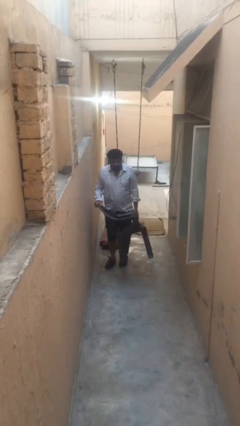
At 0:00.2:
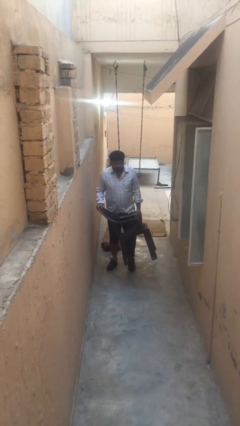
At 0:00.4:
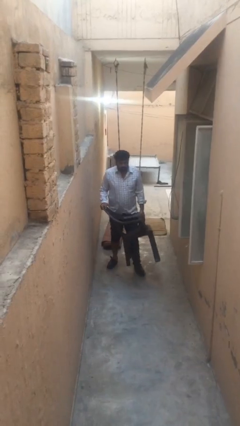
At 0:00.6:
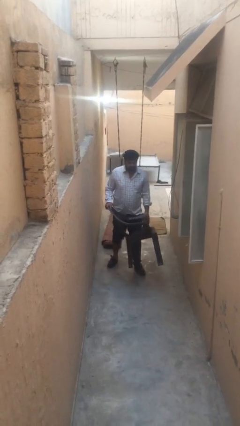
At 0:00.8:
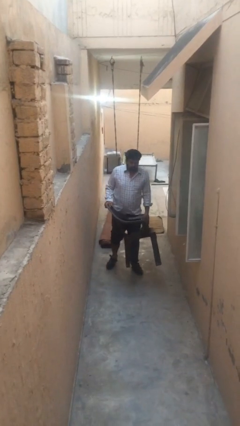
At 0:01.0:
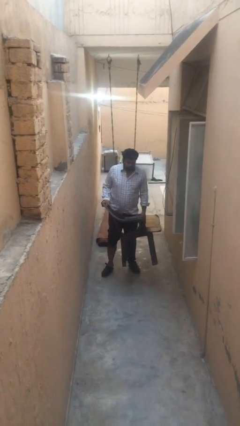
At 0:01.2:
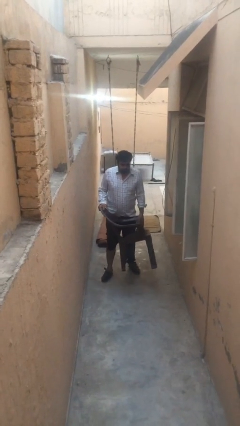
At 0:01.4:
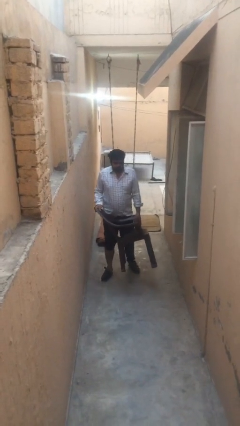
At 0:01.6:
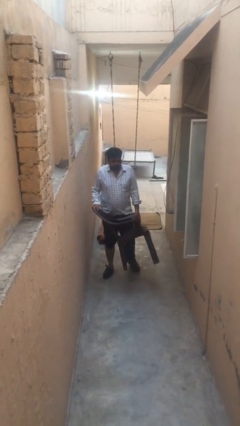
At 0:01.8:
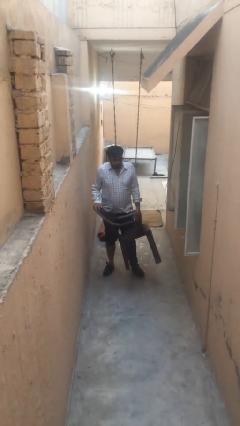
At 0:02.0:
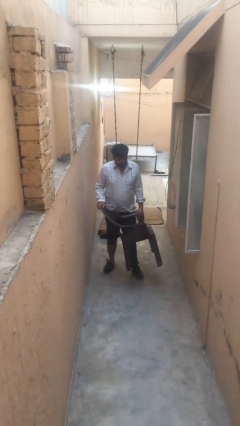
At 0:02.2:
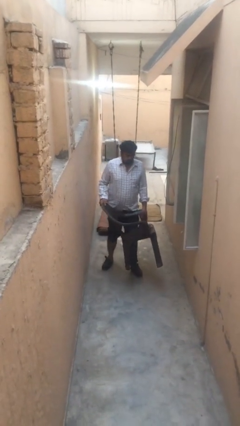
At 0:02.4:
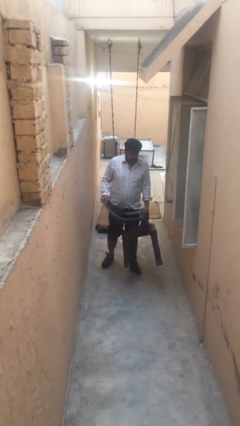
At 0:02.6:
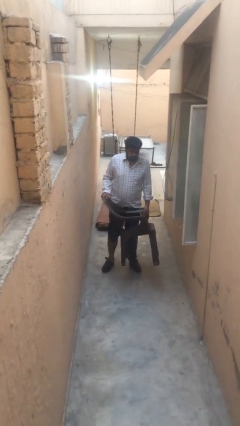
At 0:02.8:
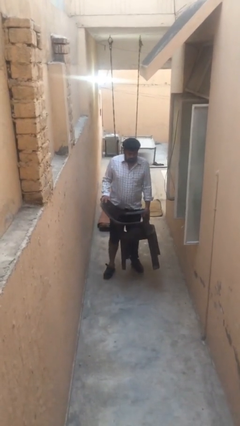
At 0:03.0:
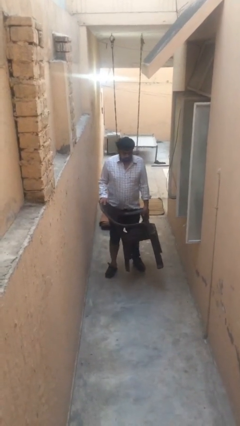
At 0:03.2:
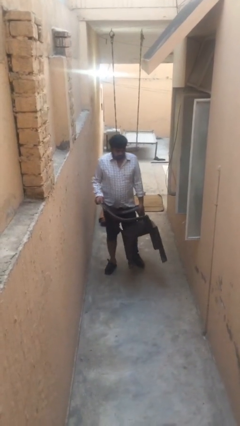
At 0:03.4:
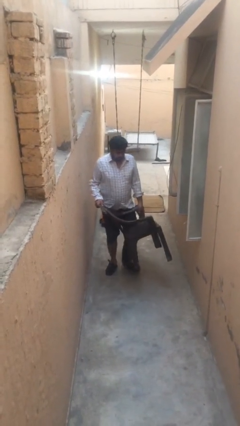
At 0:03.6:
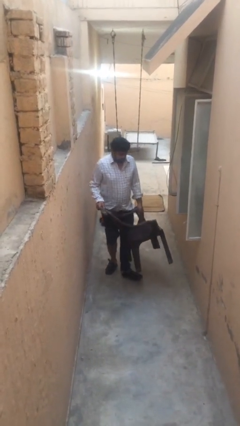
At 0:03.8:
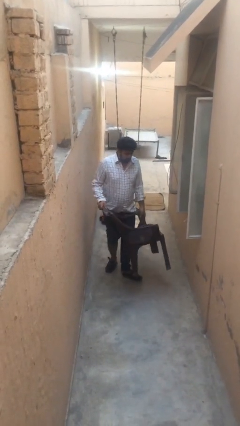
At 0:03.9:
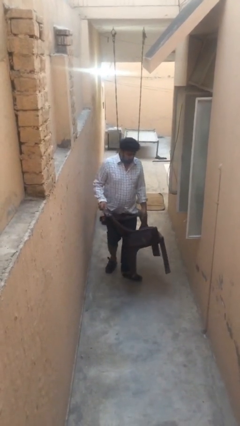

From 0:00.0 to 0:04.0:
person carries heavy object

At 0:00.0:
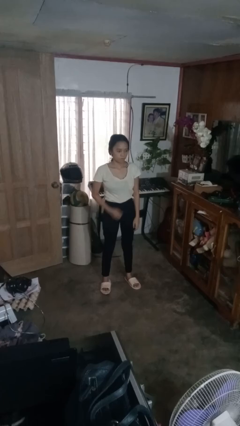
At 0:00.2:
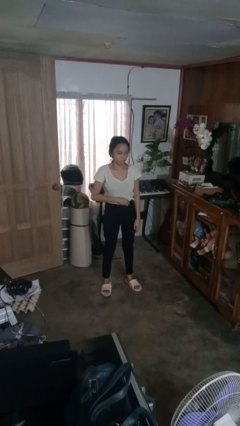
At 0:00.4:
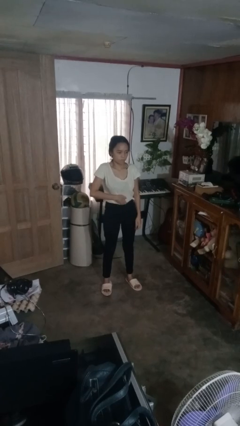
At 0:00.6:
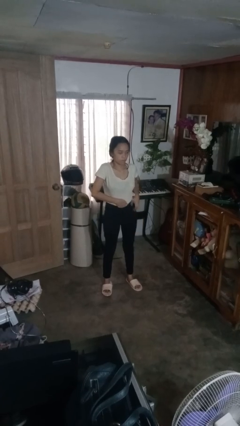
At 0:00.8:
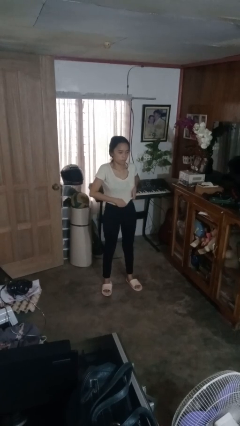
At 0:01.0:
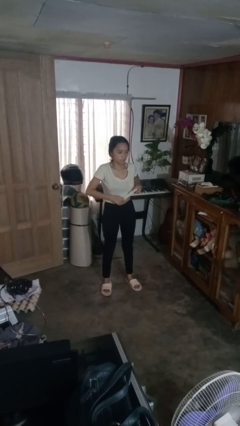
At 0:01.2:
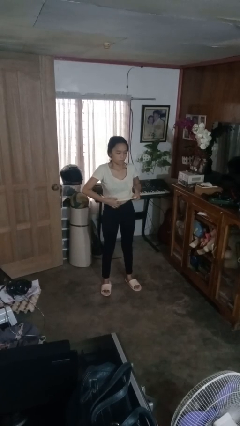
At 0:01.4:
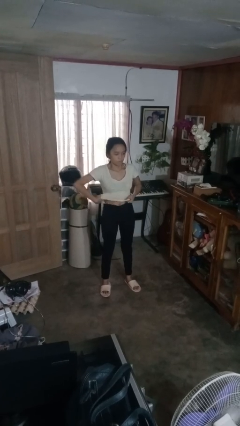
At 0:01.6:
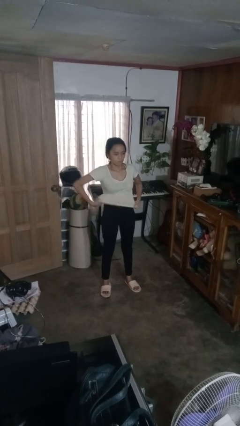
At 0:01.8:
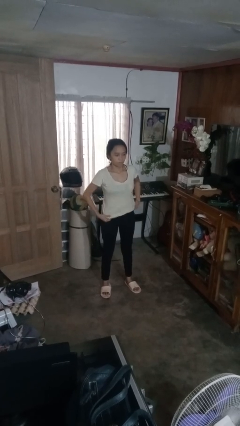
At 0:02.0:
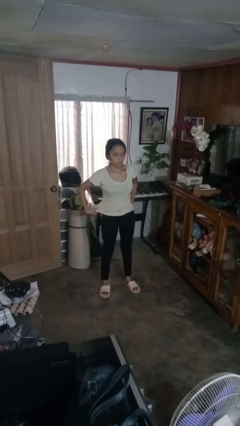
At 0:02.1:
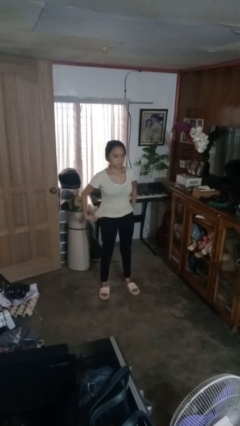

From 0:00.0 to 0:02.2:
person untucks shirt

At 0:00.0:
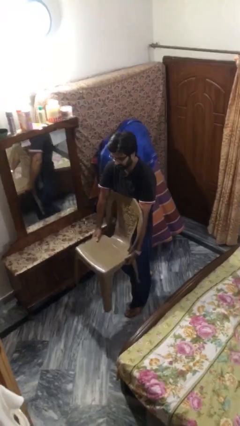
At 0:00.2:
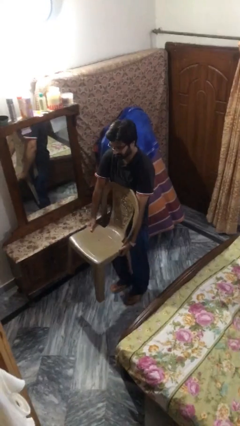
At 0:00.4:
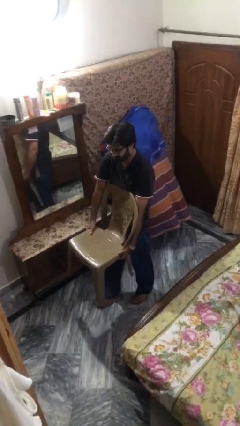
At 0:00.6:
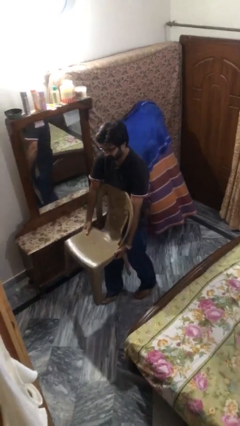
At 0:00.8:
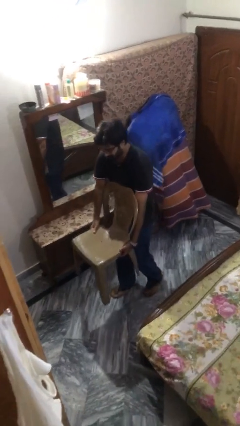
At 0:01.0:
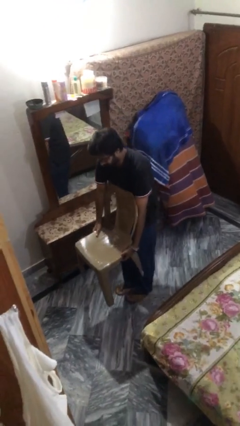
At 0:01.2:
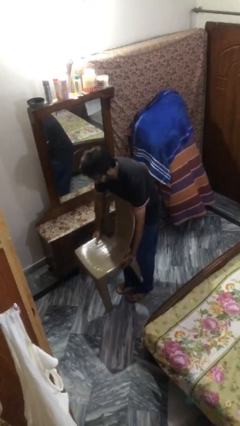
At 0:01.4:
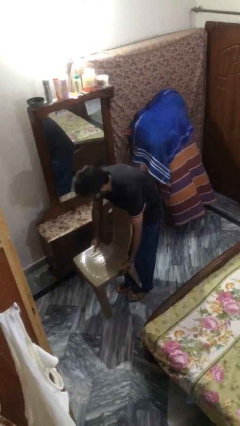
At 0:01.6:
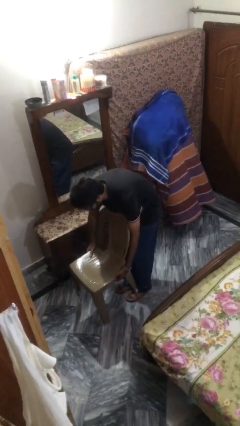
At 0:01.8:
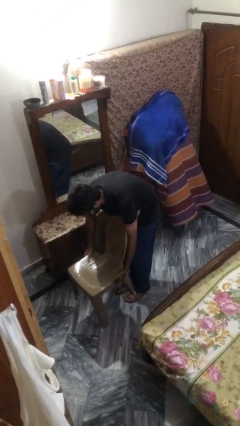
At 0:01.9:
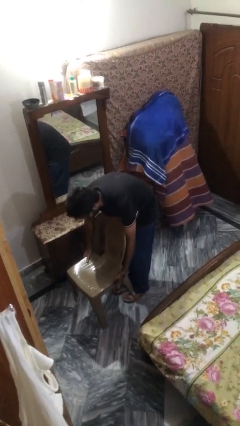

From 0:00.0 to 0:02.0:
person puts down object on floor

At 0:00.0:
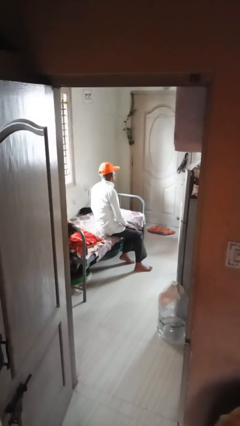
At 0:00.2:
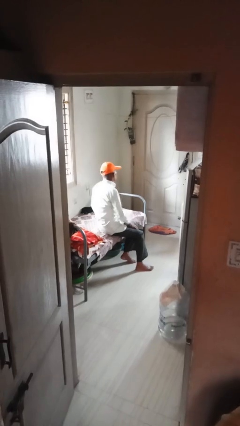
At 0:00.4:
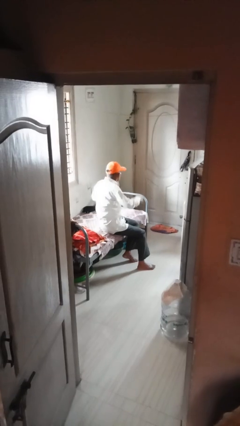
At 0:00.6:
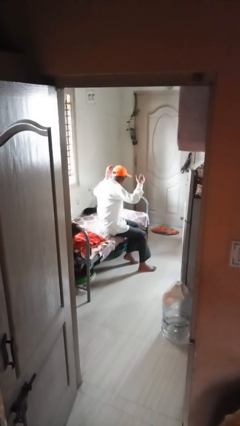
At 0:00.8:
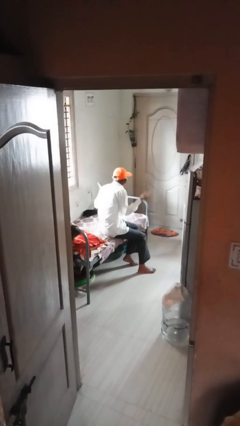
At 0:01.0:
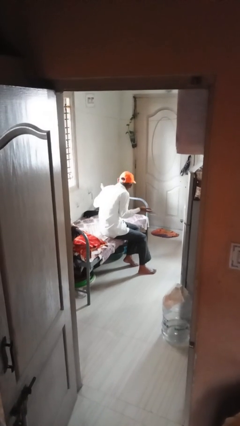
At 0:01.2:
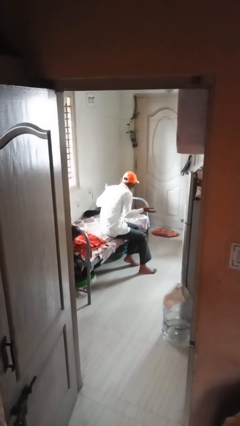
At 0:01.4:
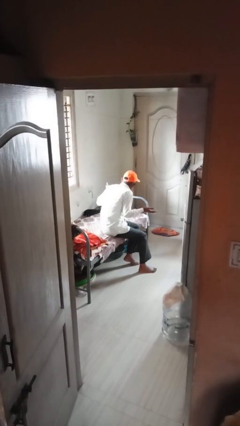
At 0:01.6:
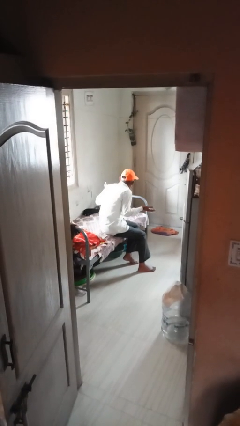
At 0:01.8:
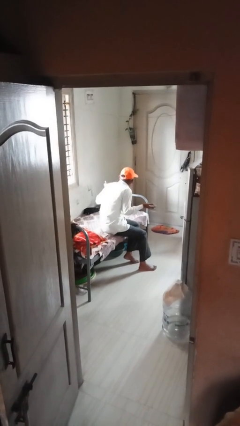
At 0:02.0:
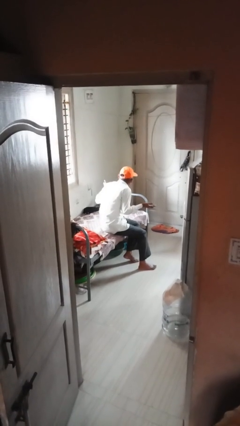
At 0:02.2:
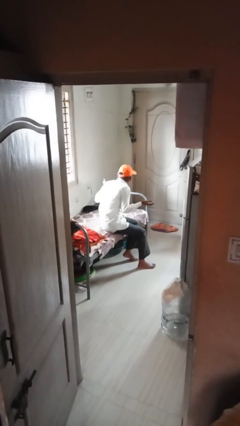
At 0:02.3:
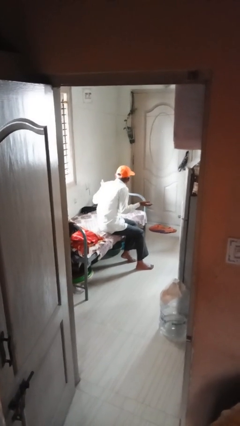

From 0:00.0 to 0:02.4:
person shrugs

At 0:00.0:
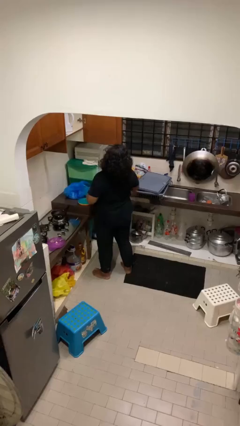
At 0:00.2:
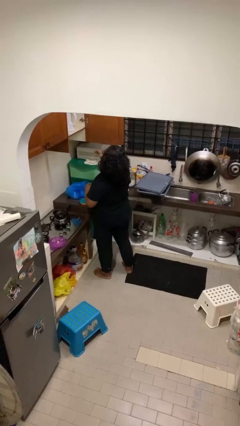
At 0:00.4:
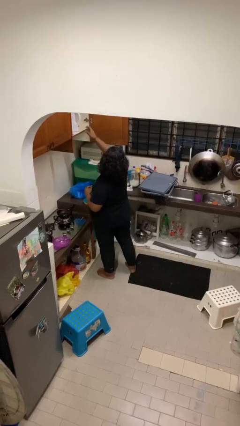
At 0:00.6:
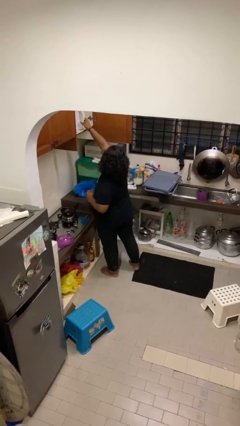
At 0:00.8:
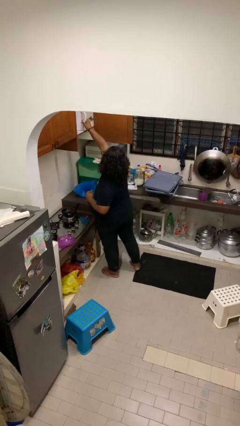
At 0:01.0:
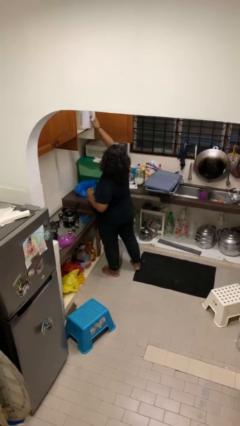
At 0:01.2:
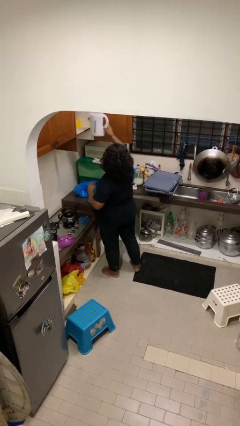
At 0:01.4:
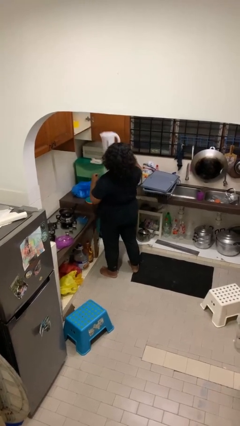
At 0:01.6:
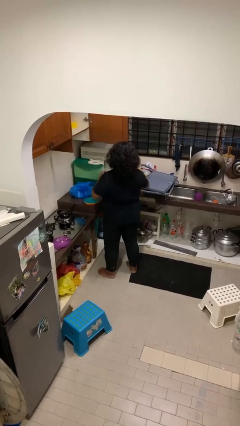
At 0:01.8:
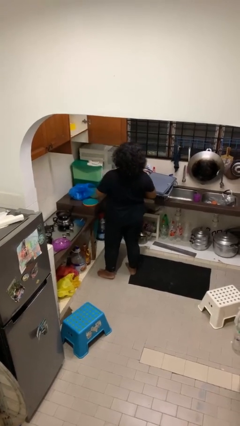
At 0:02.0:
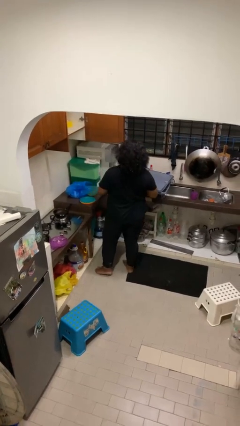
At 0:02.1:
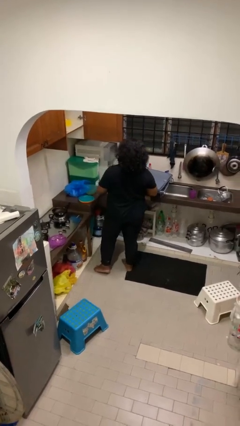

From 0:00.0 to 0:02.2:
person takes object from cabinet

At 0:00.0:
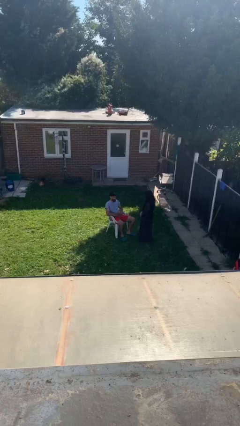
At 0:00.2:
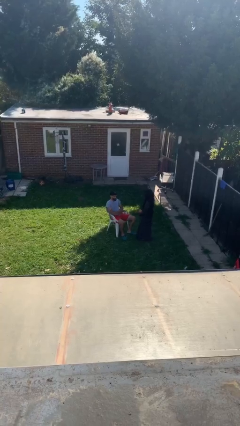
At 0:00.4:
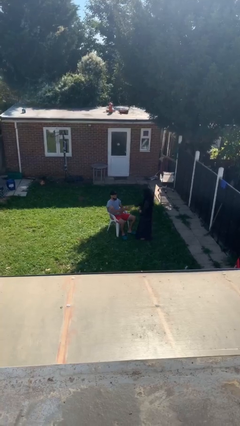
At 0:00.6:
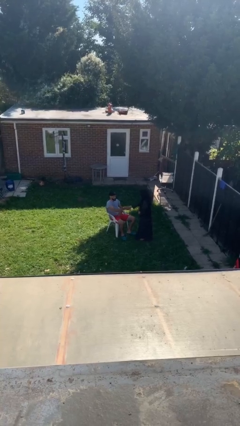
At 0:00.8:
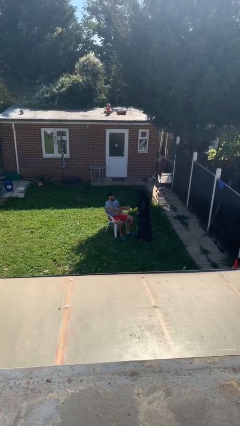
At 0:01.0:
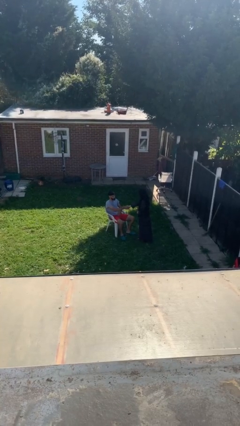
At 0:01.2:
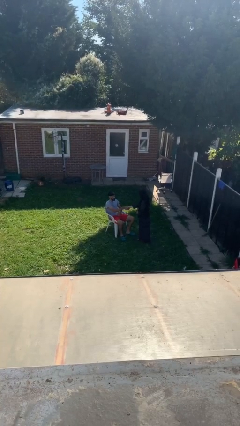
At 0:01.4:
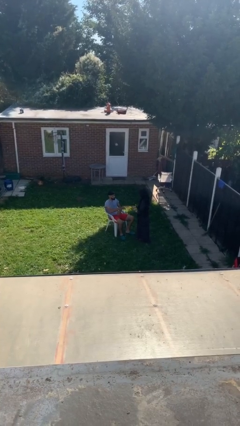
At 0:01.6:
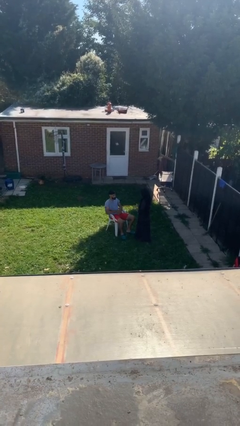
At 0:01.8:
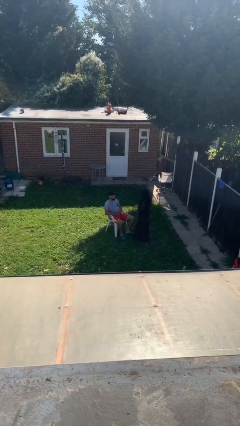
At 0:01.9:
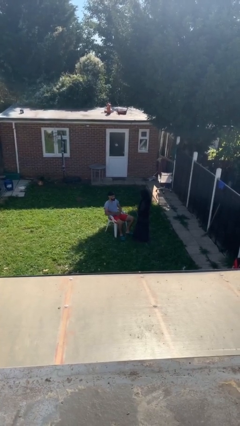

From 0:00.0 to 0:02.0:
person shakes hand

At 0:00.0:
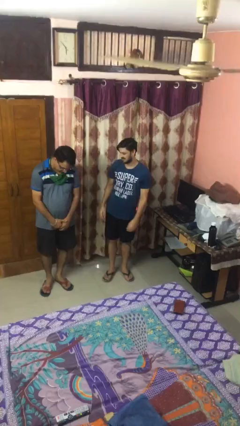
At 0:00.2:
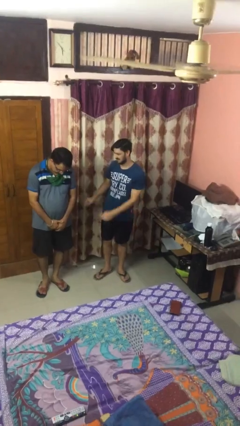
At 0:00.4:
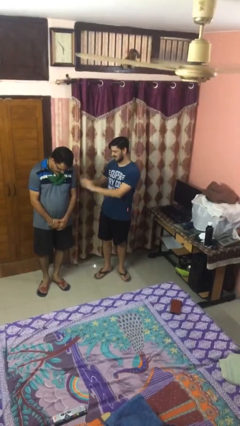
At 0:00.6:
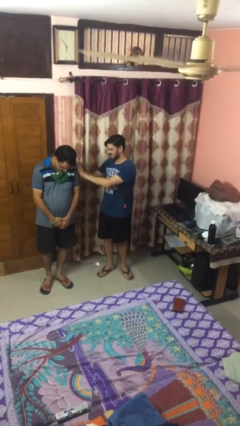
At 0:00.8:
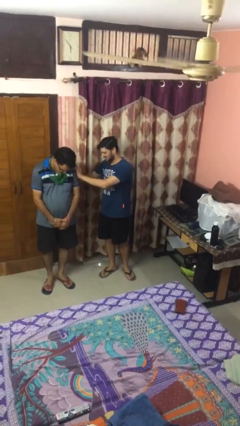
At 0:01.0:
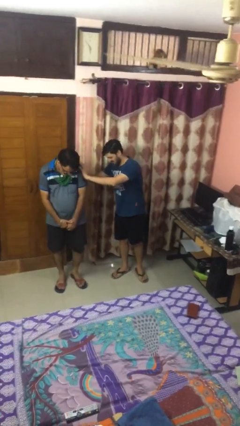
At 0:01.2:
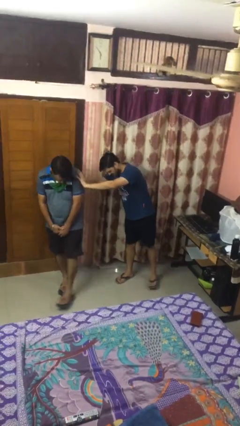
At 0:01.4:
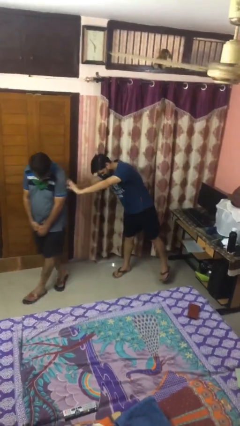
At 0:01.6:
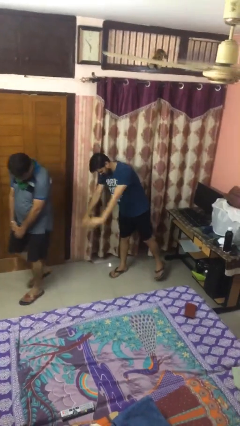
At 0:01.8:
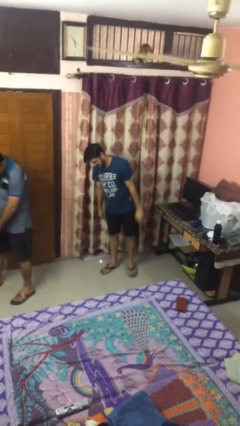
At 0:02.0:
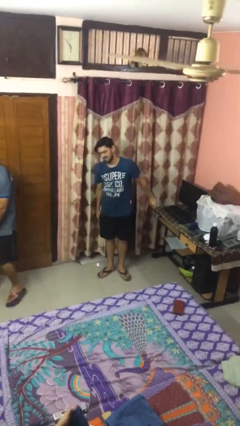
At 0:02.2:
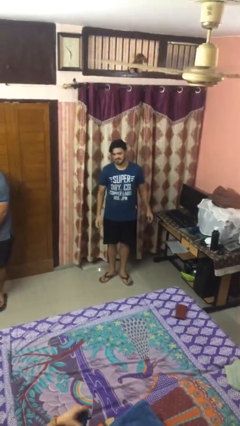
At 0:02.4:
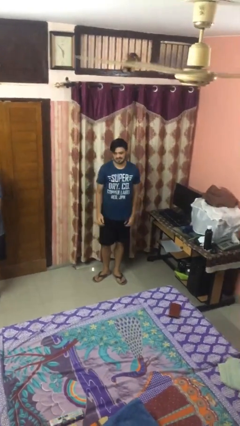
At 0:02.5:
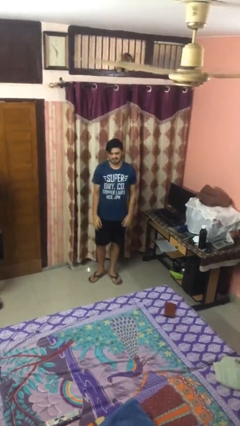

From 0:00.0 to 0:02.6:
person shoves person
